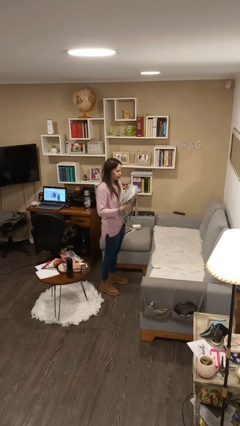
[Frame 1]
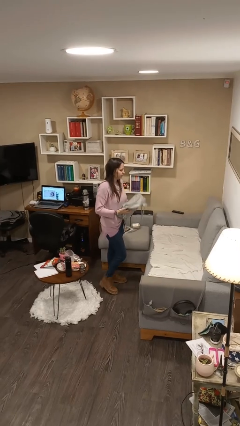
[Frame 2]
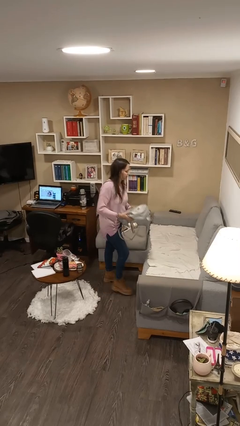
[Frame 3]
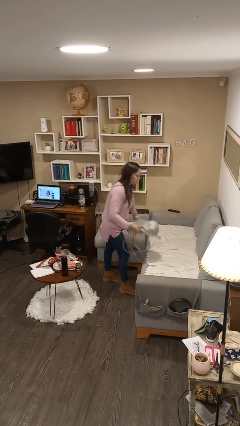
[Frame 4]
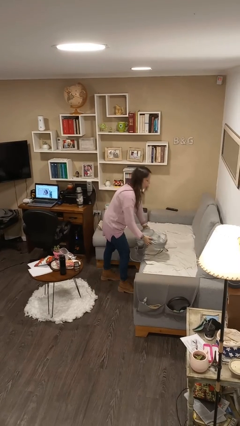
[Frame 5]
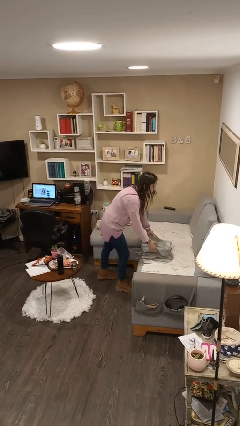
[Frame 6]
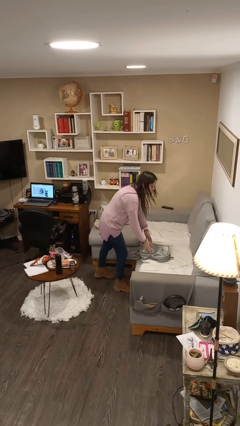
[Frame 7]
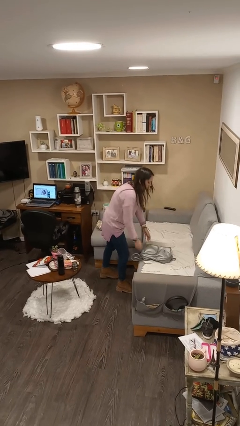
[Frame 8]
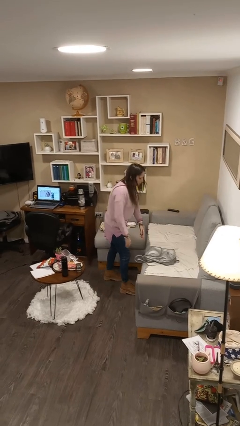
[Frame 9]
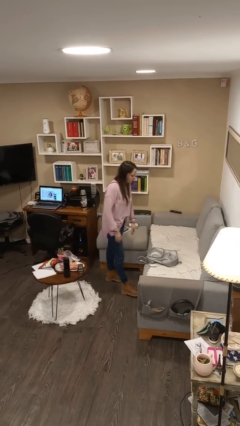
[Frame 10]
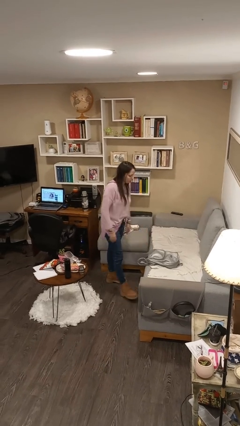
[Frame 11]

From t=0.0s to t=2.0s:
person puts down object on couch

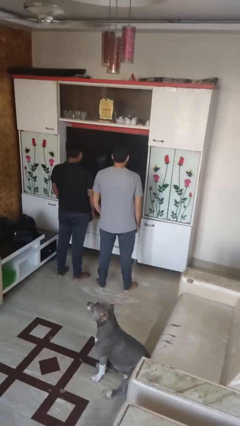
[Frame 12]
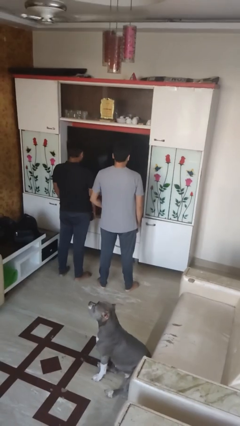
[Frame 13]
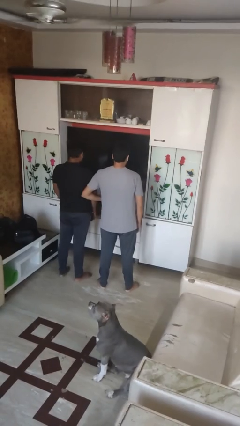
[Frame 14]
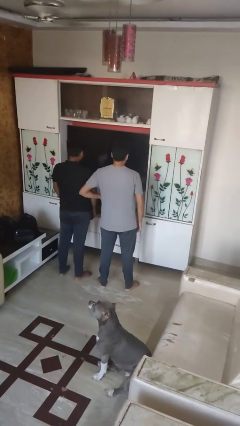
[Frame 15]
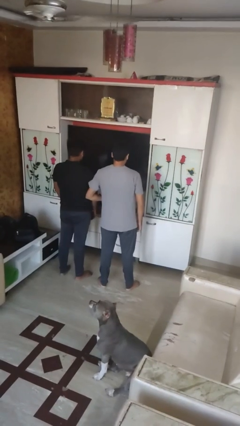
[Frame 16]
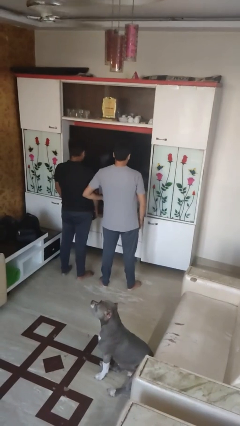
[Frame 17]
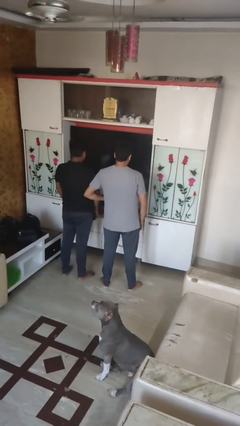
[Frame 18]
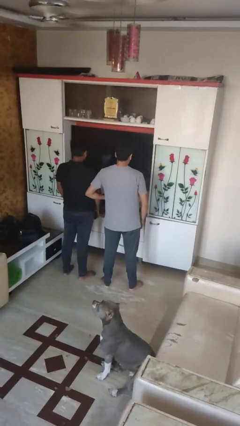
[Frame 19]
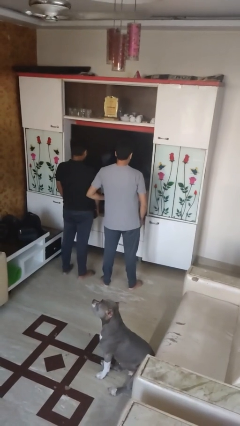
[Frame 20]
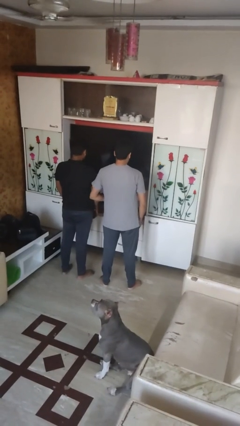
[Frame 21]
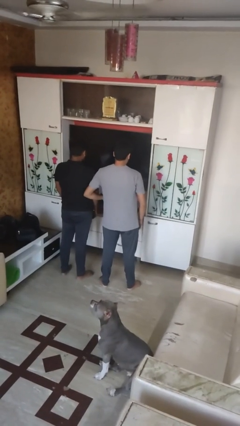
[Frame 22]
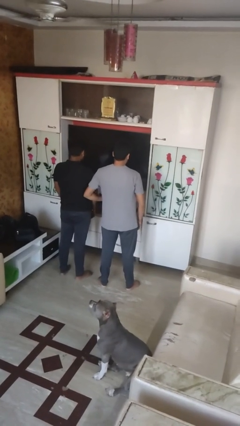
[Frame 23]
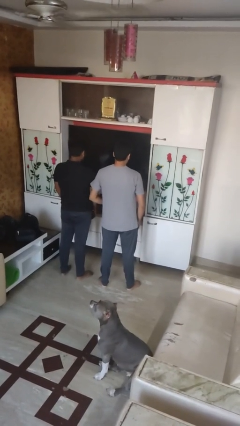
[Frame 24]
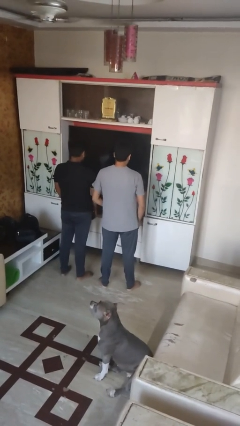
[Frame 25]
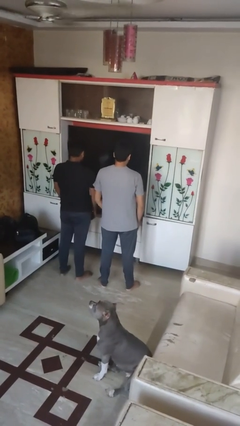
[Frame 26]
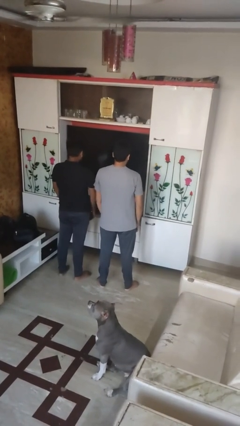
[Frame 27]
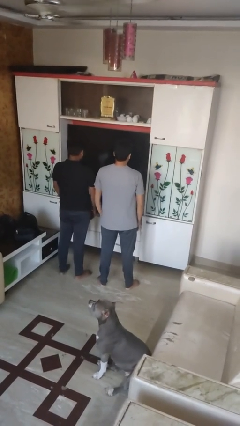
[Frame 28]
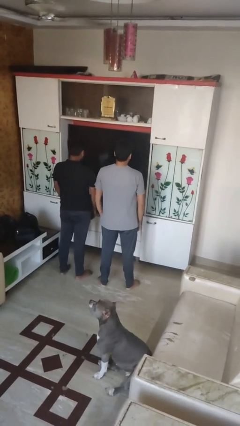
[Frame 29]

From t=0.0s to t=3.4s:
person nudges person with elbow

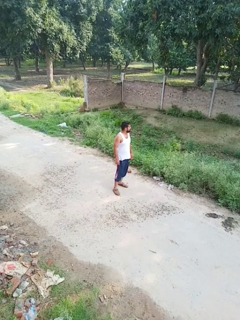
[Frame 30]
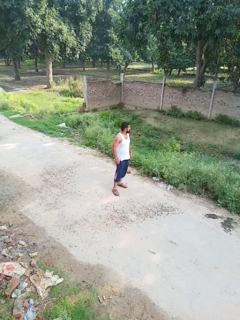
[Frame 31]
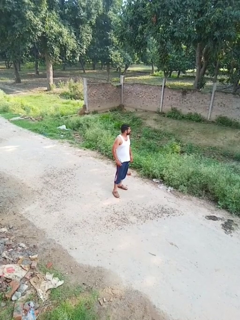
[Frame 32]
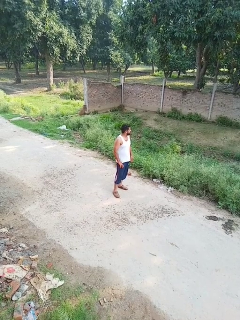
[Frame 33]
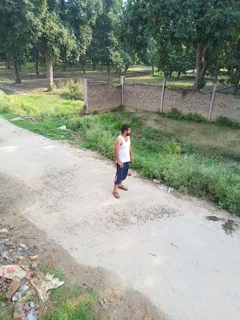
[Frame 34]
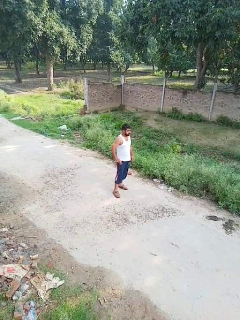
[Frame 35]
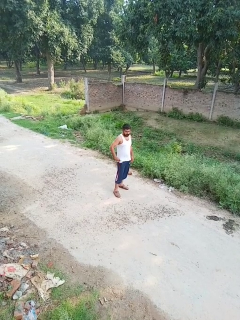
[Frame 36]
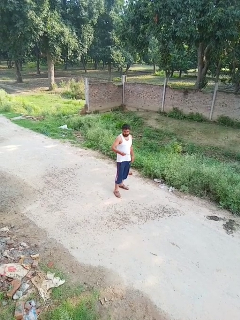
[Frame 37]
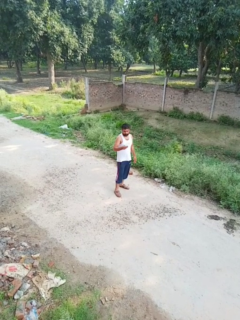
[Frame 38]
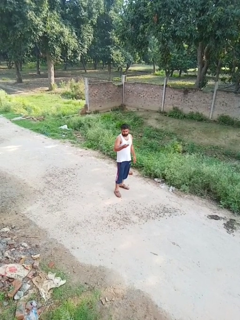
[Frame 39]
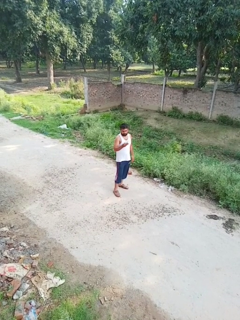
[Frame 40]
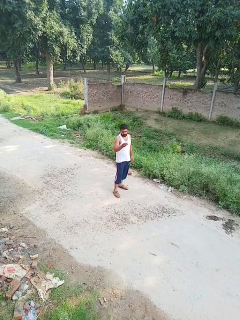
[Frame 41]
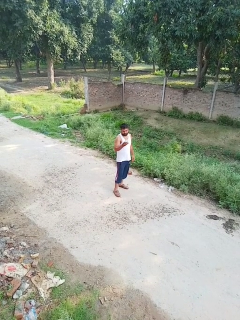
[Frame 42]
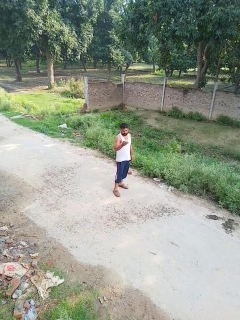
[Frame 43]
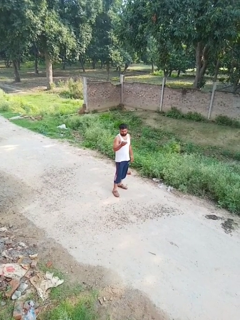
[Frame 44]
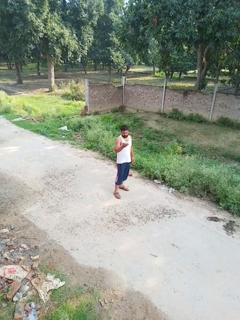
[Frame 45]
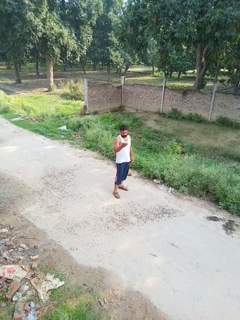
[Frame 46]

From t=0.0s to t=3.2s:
person takes phone from pocket

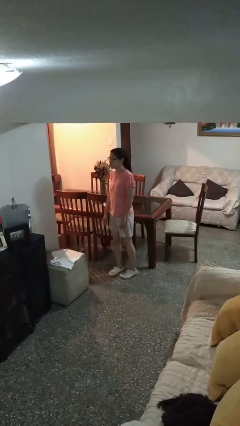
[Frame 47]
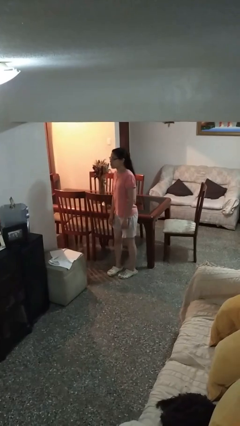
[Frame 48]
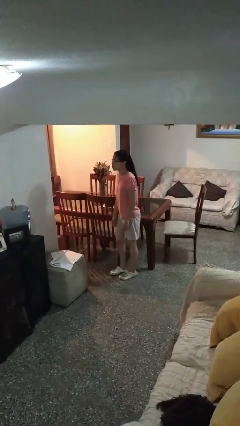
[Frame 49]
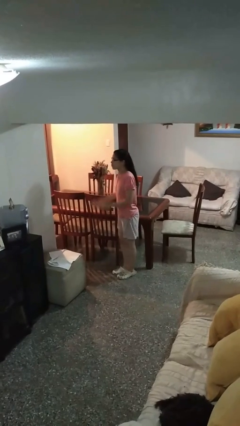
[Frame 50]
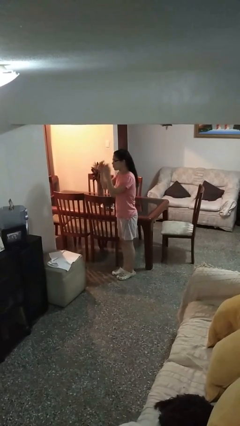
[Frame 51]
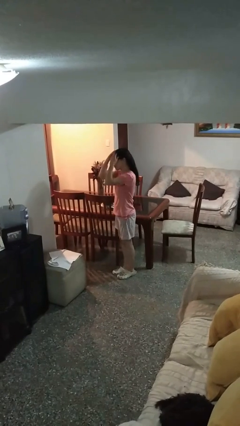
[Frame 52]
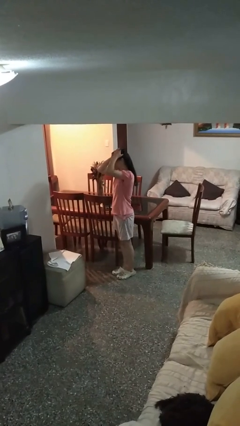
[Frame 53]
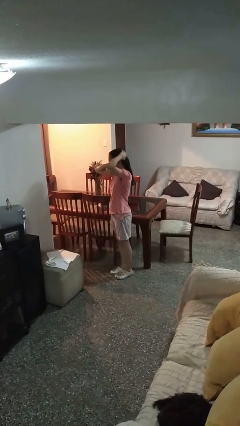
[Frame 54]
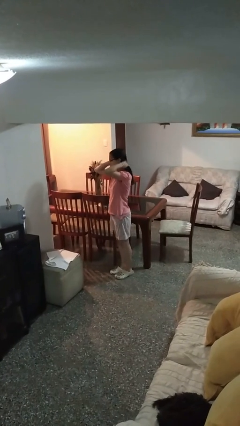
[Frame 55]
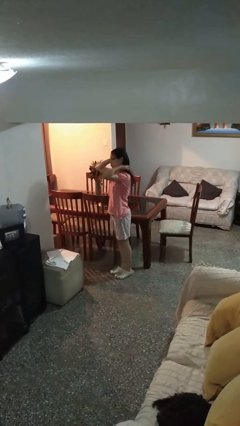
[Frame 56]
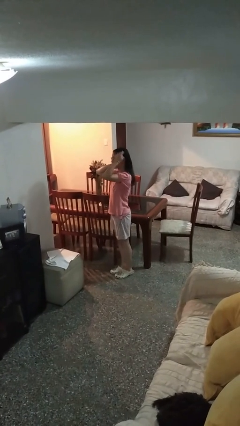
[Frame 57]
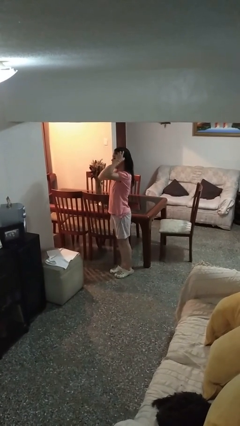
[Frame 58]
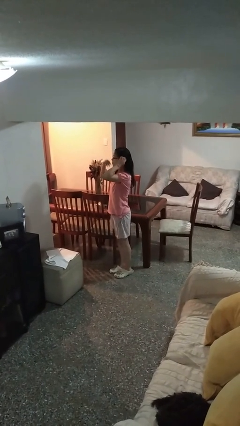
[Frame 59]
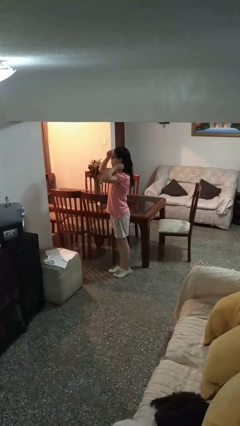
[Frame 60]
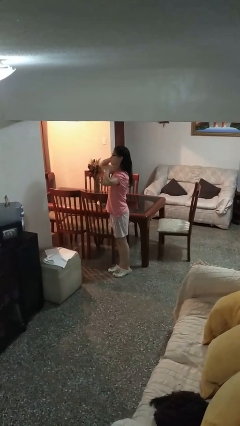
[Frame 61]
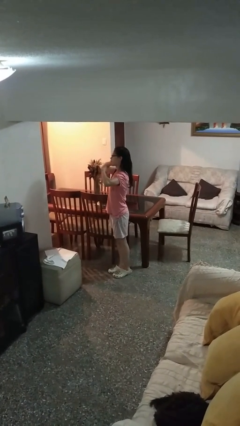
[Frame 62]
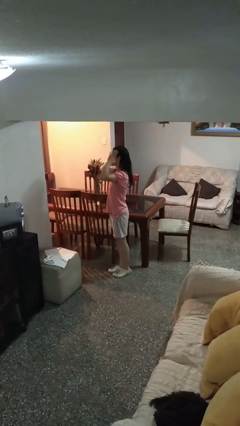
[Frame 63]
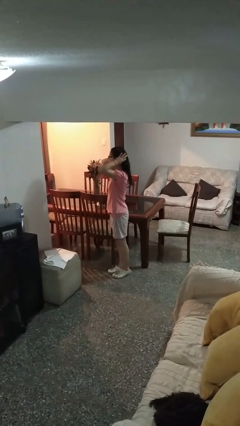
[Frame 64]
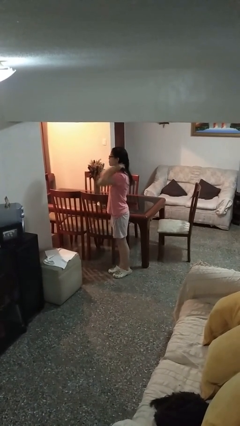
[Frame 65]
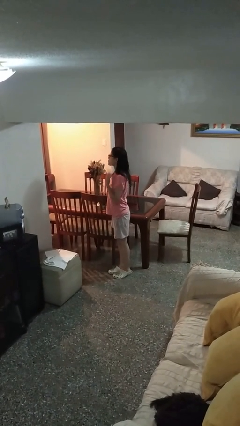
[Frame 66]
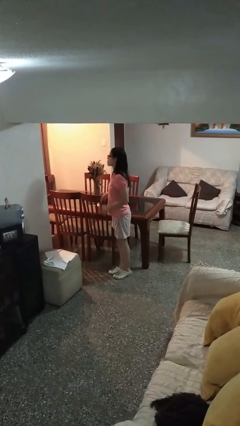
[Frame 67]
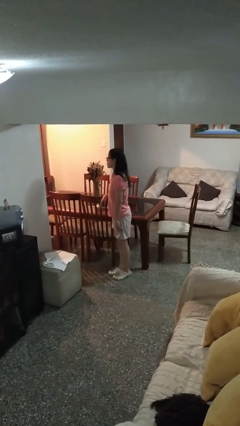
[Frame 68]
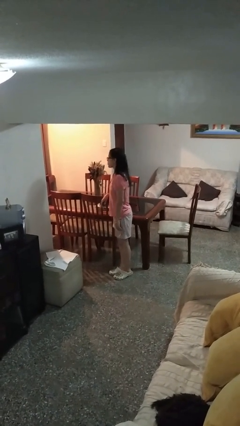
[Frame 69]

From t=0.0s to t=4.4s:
person strokes hair

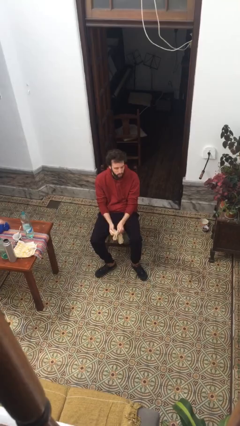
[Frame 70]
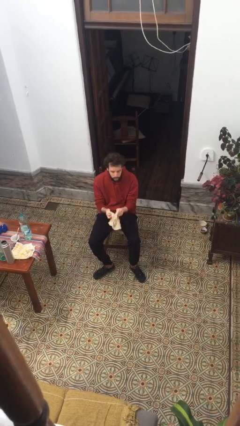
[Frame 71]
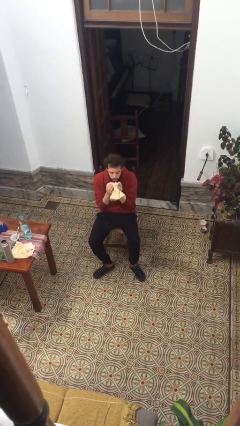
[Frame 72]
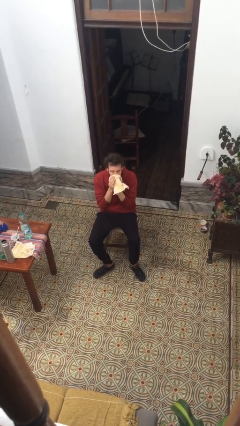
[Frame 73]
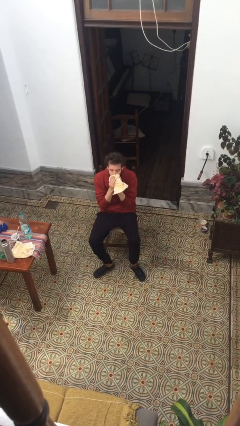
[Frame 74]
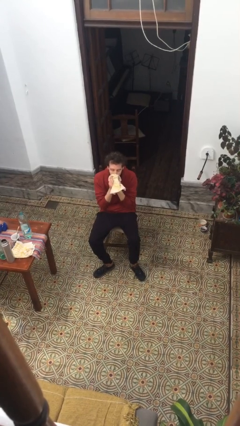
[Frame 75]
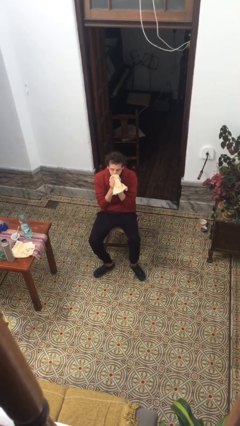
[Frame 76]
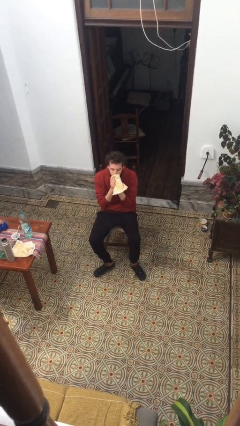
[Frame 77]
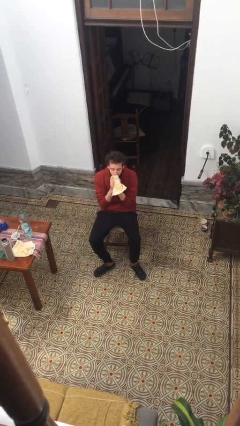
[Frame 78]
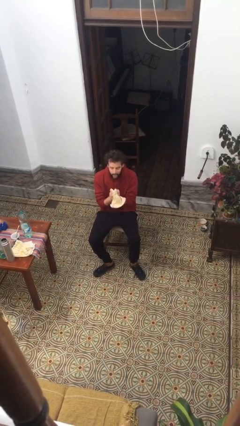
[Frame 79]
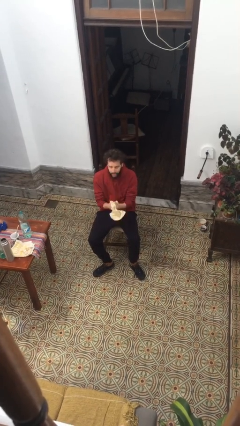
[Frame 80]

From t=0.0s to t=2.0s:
person wipes mouth with napkin

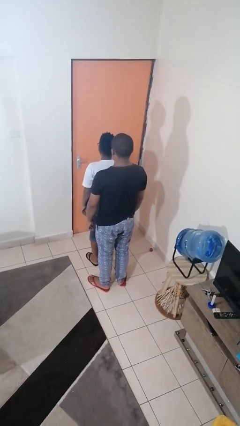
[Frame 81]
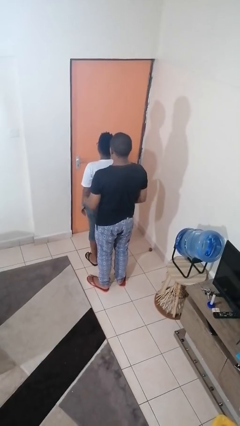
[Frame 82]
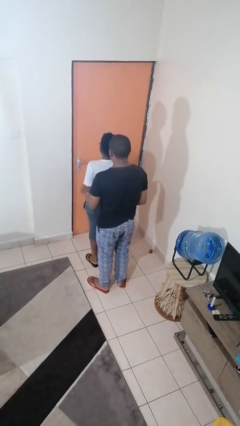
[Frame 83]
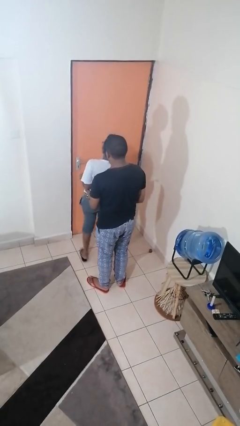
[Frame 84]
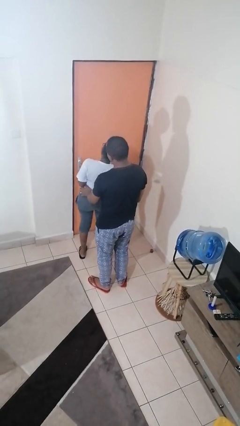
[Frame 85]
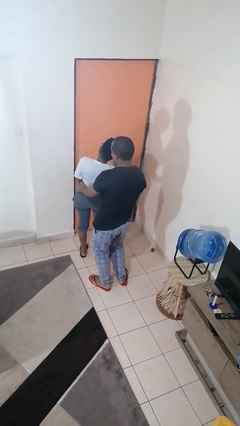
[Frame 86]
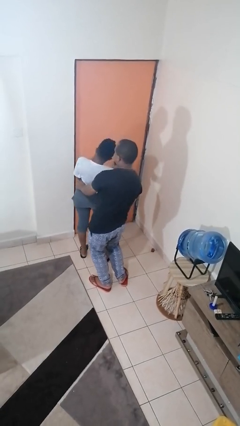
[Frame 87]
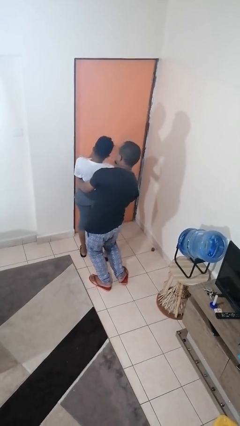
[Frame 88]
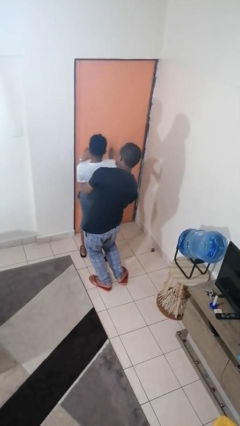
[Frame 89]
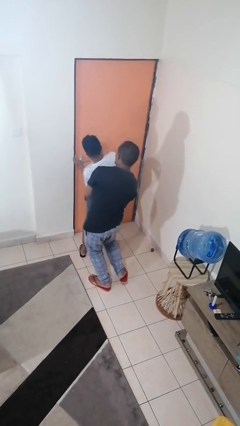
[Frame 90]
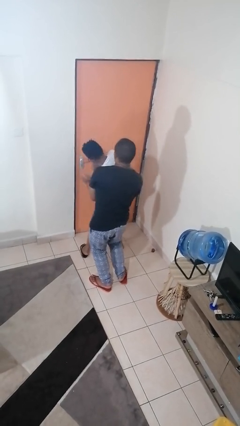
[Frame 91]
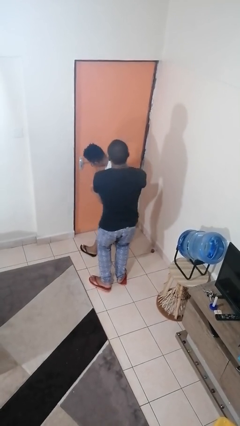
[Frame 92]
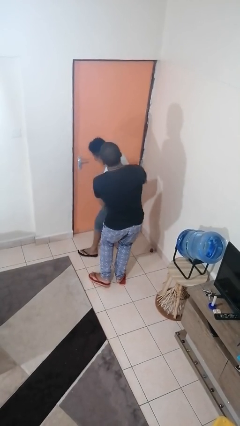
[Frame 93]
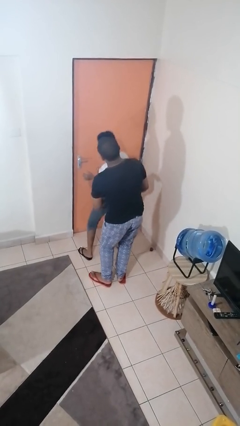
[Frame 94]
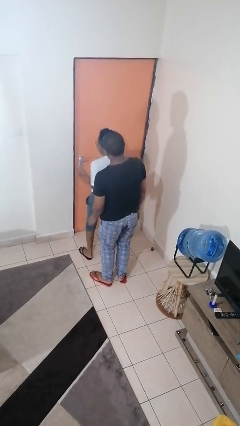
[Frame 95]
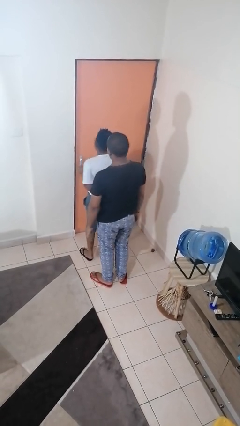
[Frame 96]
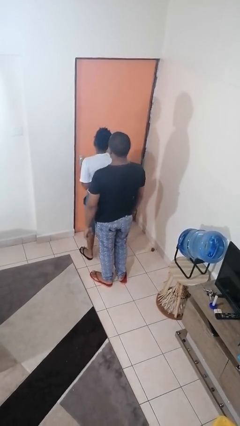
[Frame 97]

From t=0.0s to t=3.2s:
person tickles person

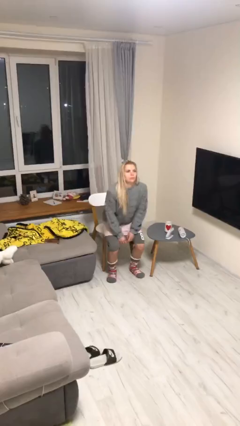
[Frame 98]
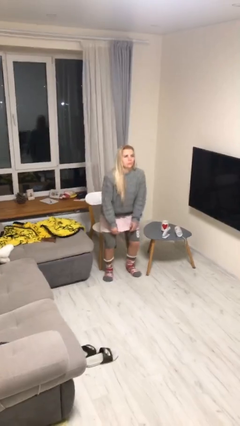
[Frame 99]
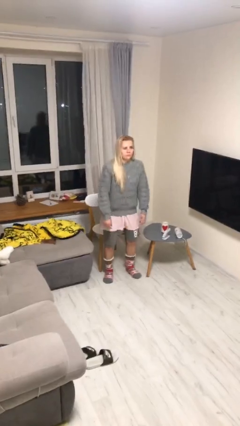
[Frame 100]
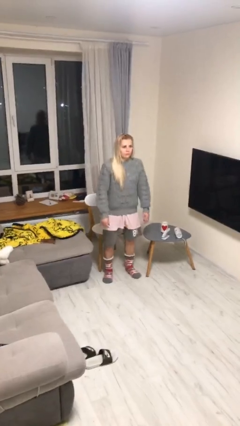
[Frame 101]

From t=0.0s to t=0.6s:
person stands up
